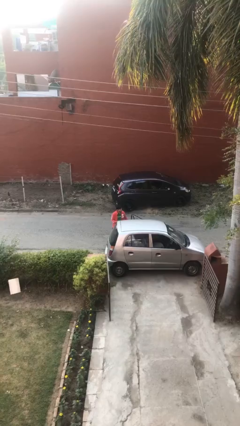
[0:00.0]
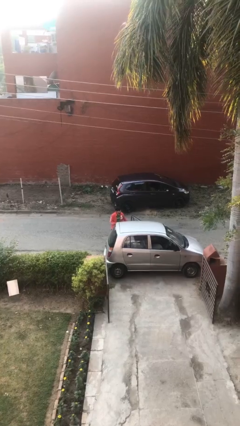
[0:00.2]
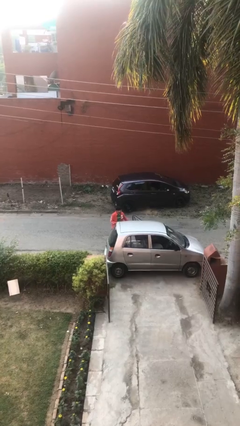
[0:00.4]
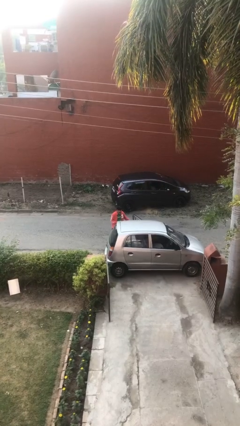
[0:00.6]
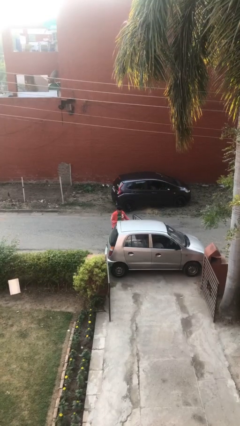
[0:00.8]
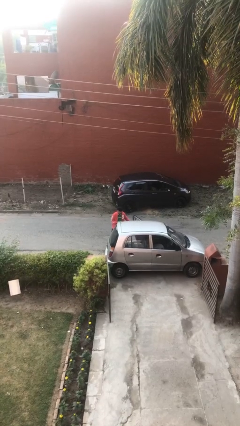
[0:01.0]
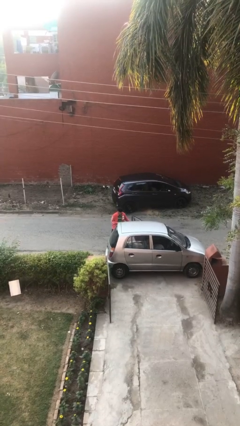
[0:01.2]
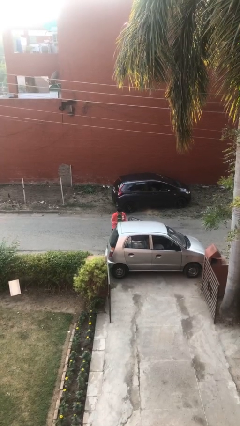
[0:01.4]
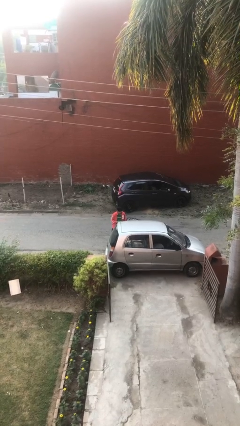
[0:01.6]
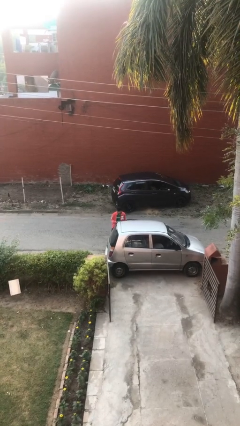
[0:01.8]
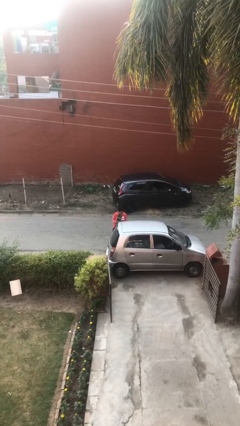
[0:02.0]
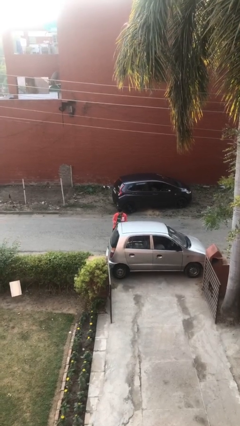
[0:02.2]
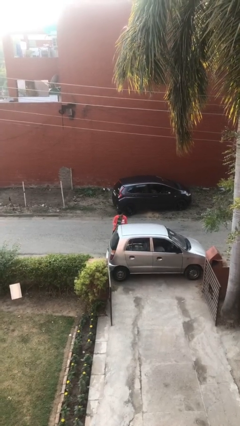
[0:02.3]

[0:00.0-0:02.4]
person closes car door

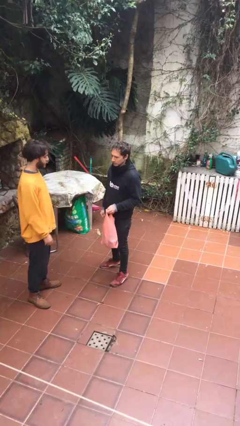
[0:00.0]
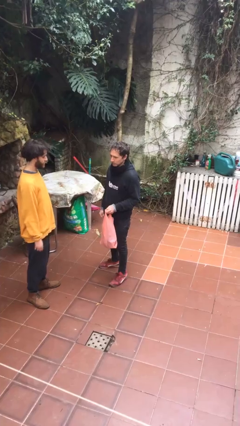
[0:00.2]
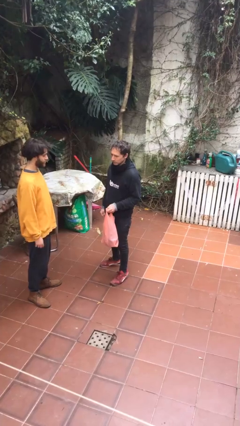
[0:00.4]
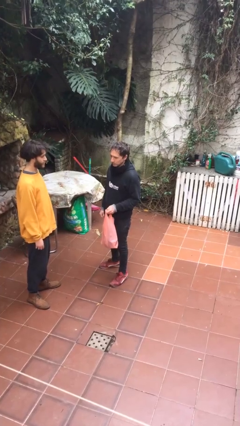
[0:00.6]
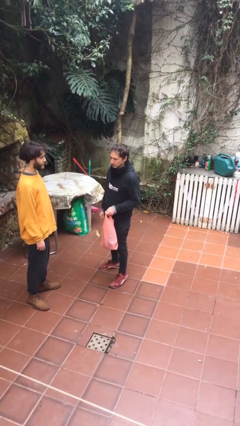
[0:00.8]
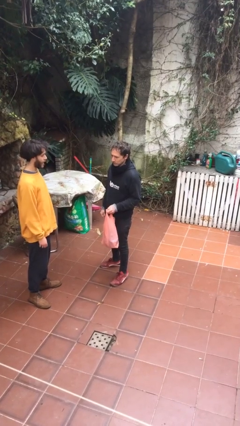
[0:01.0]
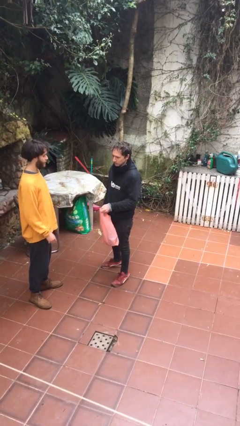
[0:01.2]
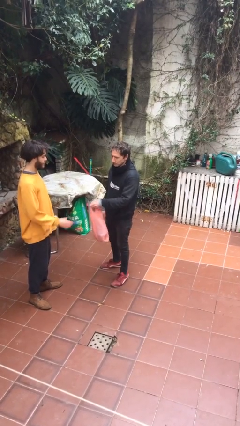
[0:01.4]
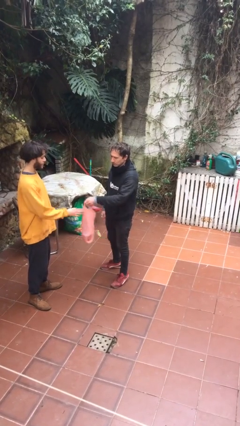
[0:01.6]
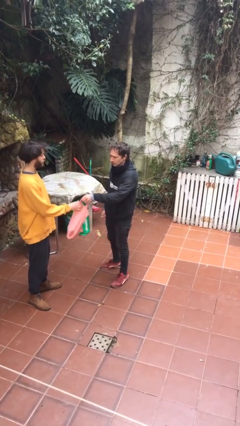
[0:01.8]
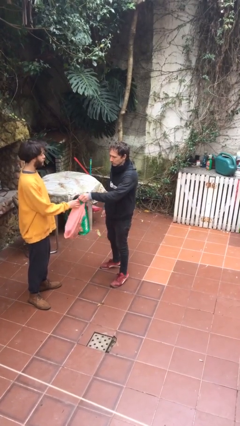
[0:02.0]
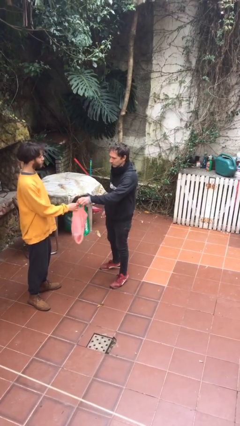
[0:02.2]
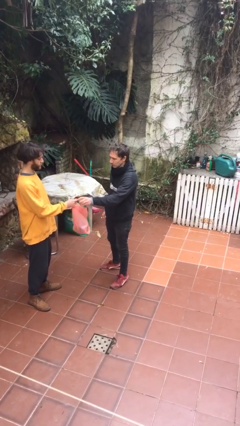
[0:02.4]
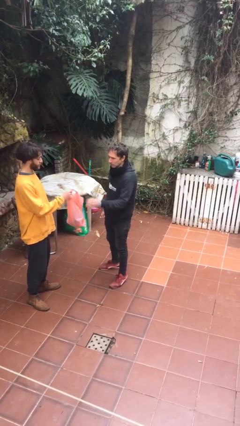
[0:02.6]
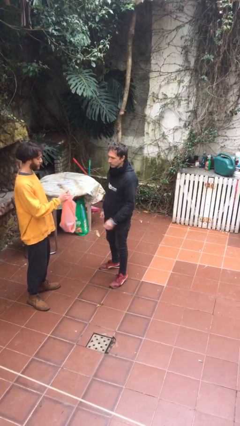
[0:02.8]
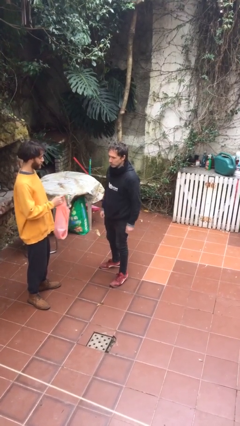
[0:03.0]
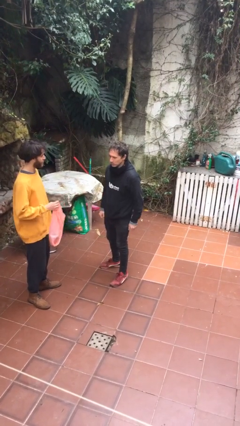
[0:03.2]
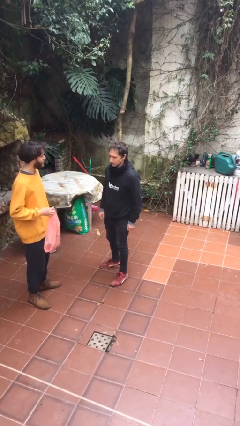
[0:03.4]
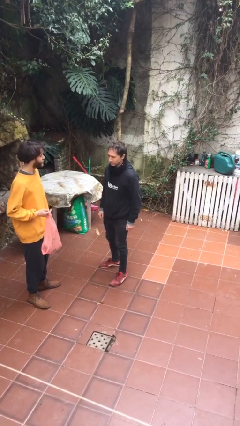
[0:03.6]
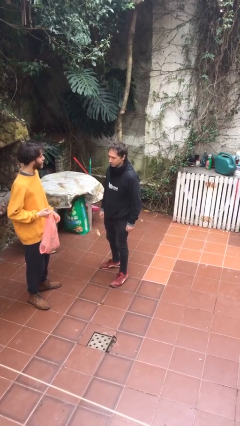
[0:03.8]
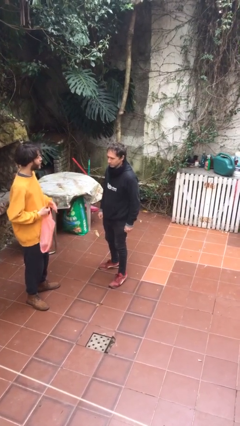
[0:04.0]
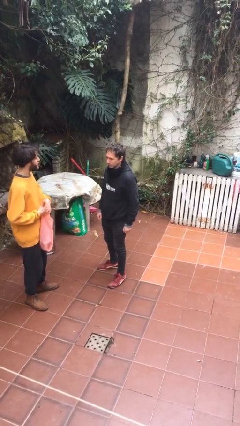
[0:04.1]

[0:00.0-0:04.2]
person transfers object to person

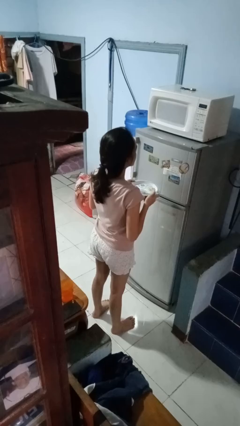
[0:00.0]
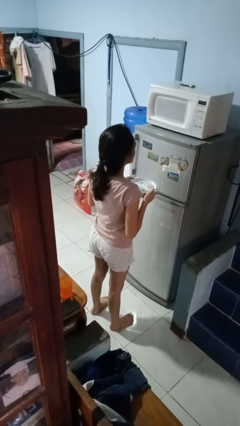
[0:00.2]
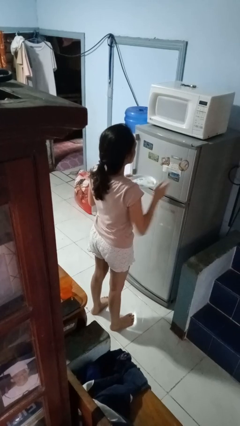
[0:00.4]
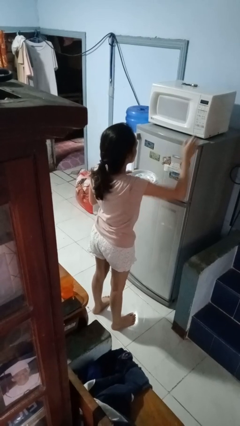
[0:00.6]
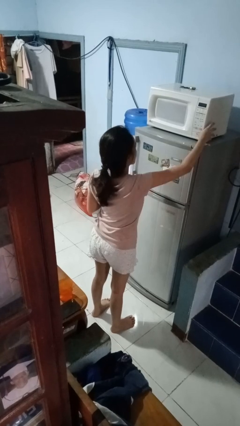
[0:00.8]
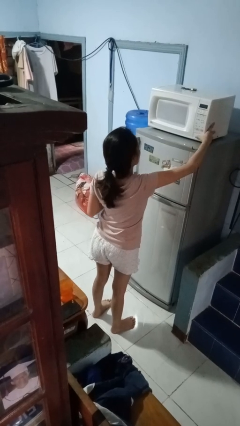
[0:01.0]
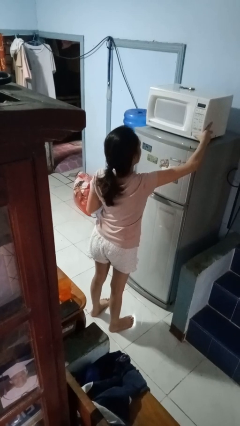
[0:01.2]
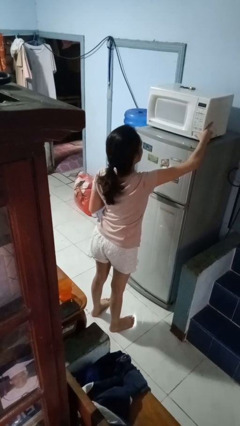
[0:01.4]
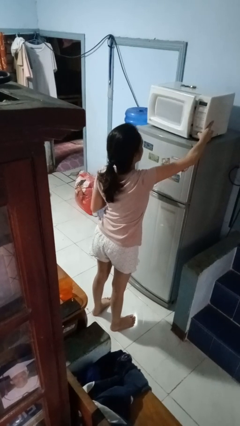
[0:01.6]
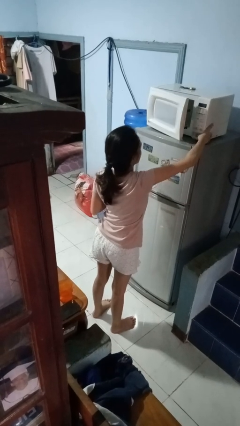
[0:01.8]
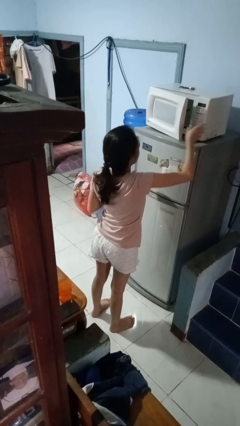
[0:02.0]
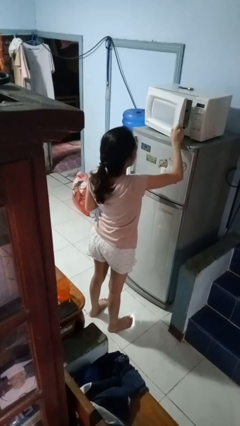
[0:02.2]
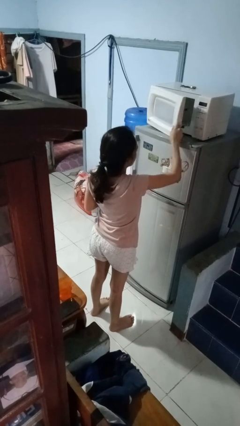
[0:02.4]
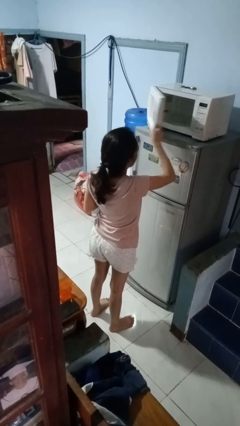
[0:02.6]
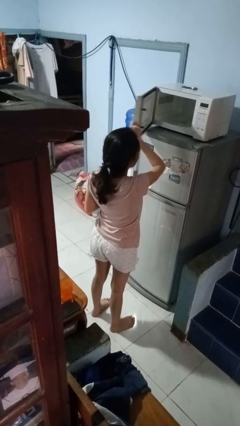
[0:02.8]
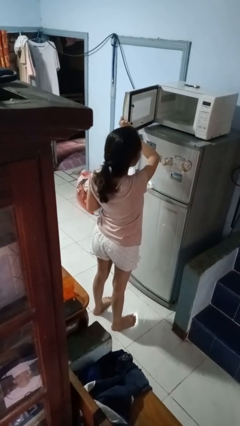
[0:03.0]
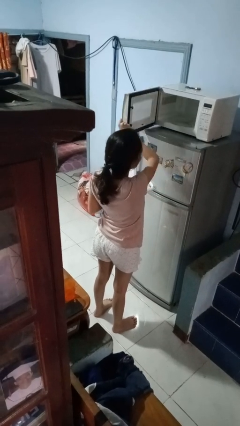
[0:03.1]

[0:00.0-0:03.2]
person opens microwave

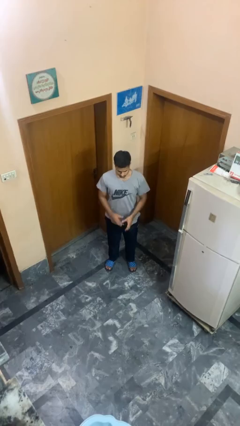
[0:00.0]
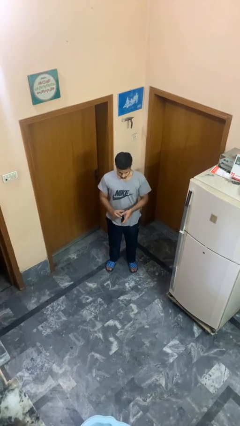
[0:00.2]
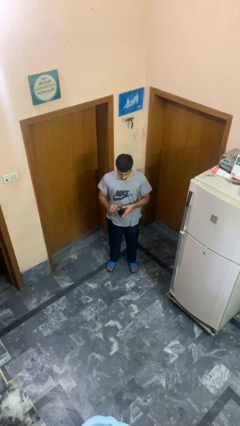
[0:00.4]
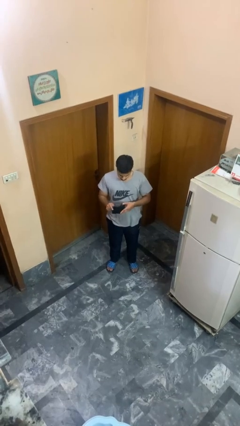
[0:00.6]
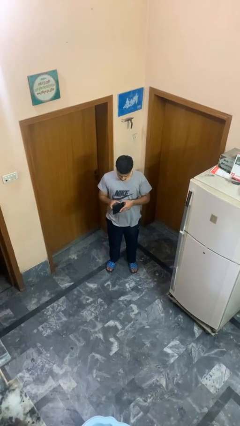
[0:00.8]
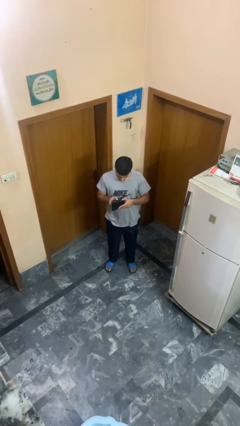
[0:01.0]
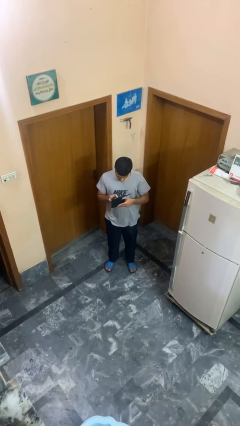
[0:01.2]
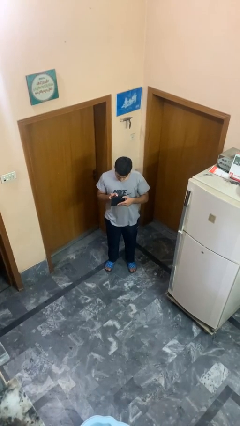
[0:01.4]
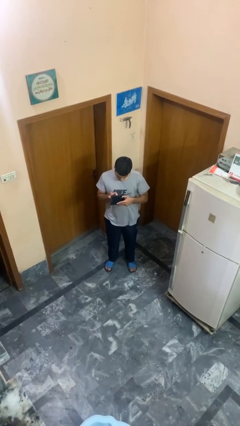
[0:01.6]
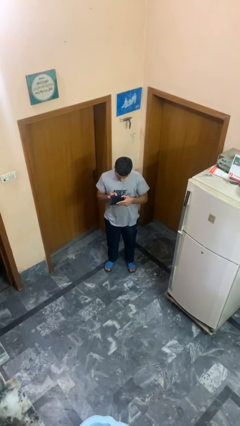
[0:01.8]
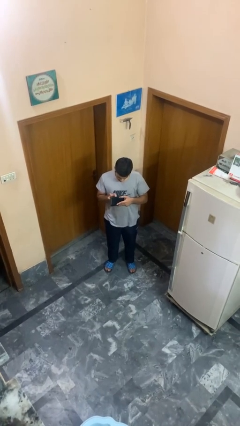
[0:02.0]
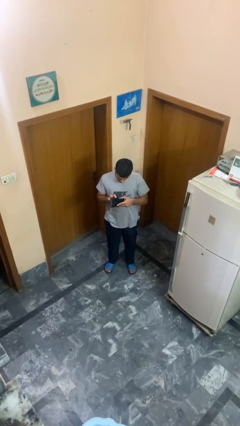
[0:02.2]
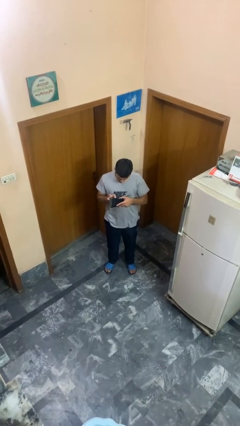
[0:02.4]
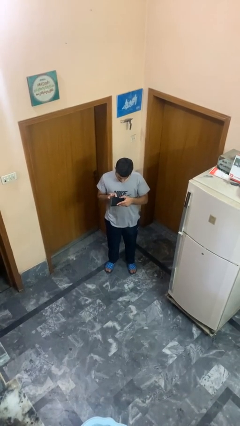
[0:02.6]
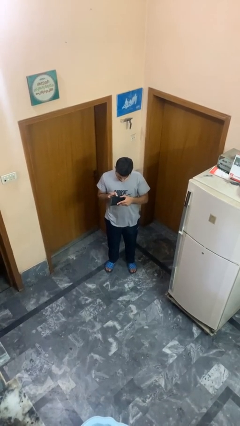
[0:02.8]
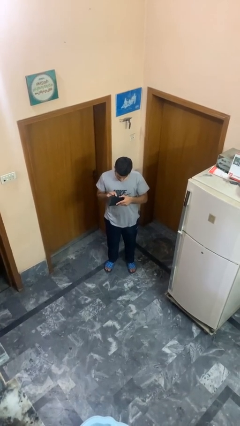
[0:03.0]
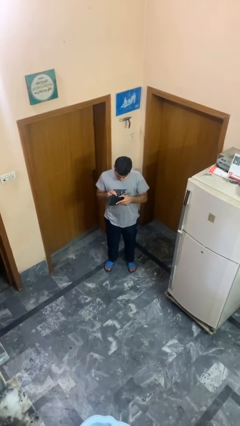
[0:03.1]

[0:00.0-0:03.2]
person searches in purse

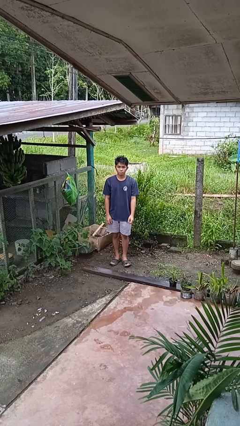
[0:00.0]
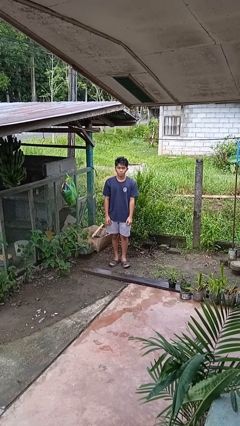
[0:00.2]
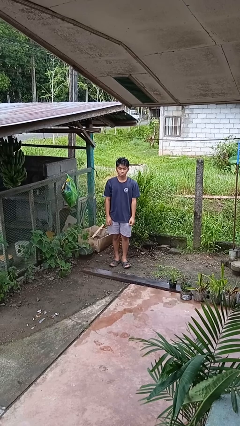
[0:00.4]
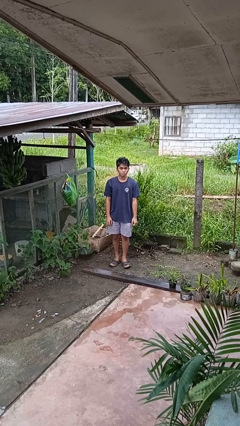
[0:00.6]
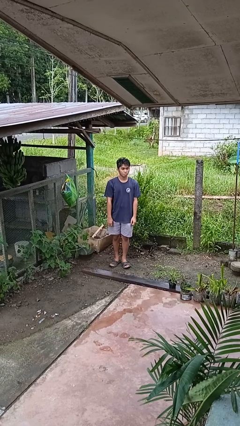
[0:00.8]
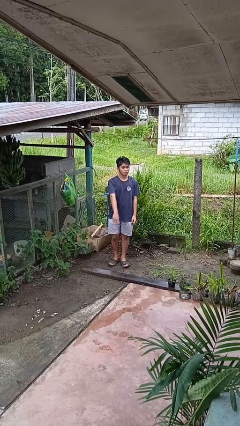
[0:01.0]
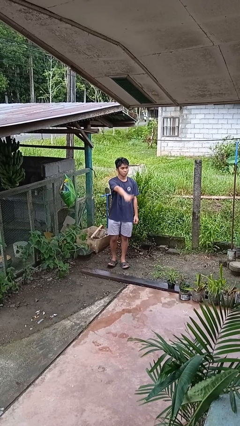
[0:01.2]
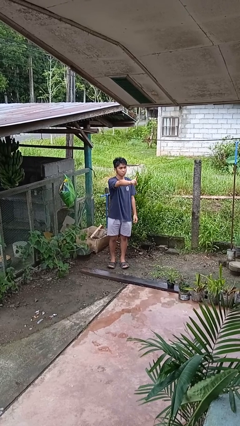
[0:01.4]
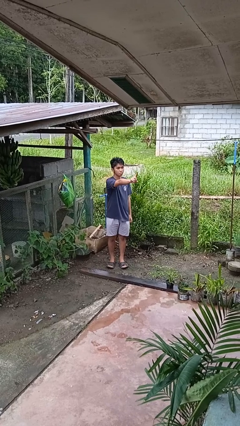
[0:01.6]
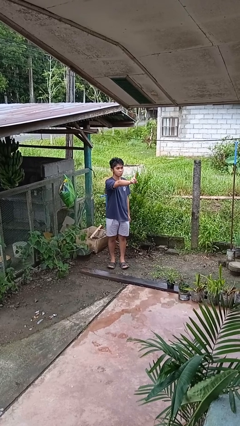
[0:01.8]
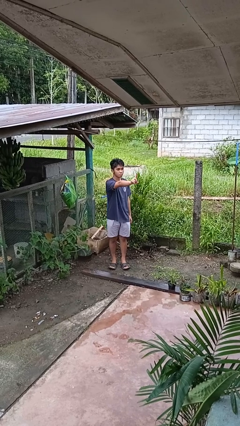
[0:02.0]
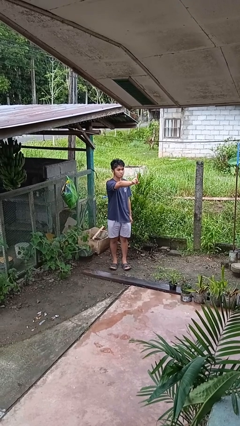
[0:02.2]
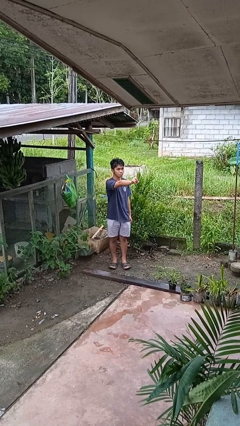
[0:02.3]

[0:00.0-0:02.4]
person gestures number one

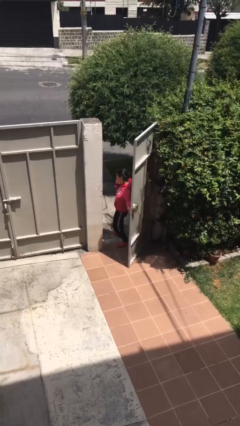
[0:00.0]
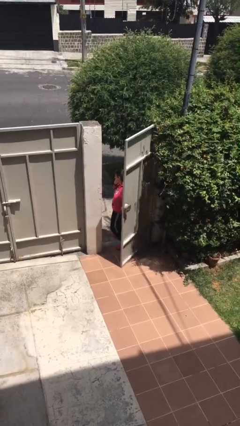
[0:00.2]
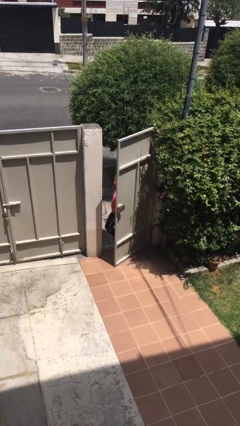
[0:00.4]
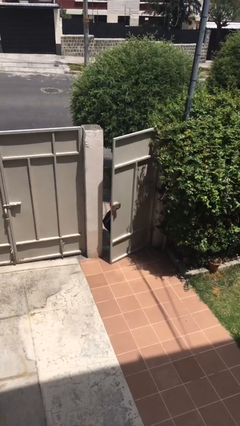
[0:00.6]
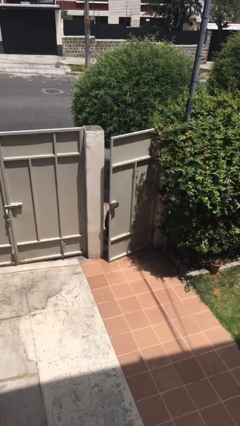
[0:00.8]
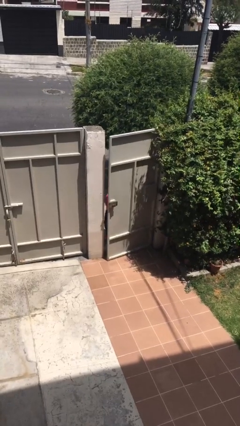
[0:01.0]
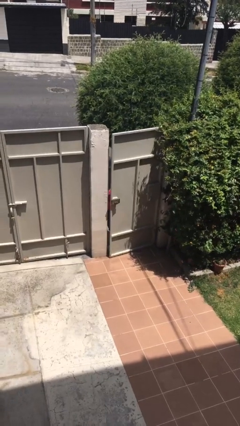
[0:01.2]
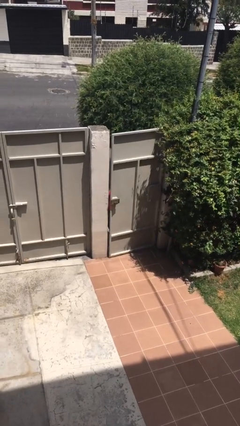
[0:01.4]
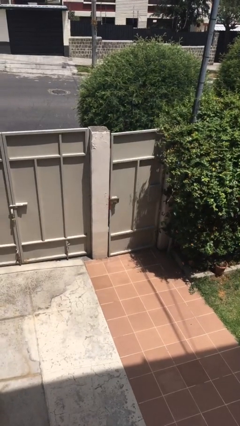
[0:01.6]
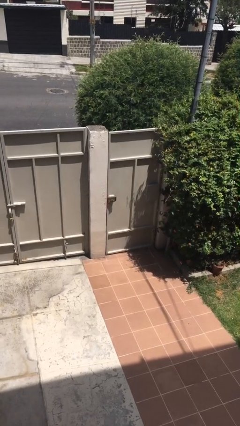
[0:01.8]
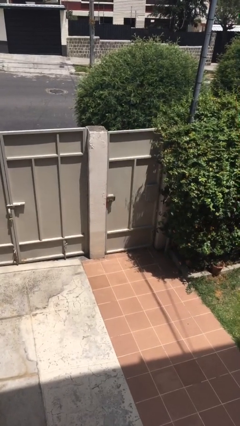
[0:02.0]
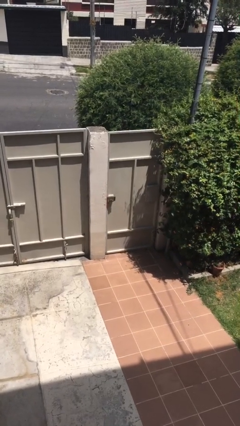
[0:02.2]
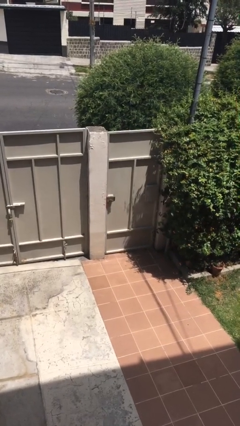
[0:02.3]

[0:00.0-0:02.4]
person closes facility door
